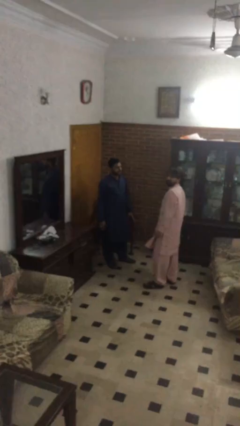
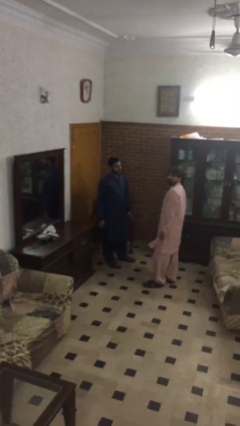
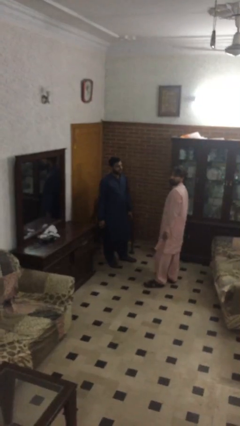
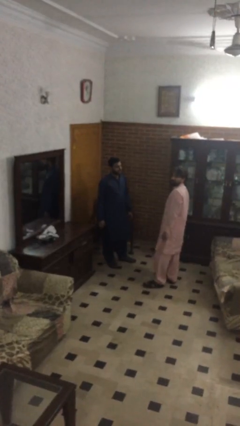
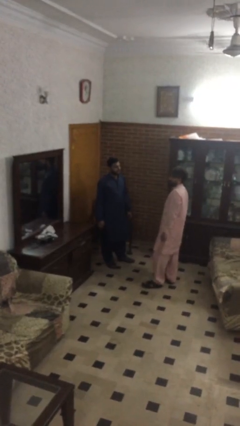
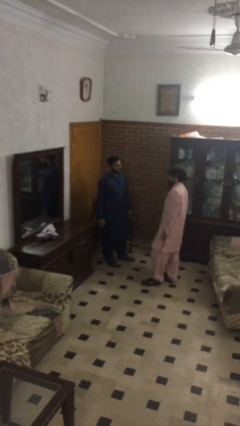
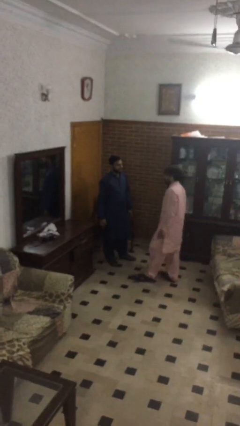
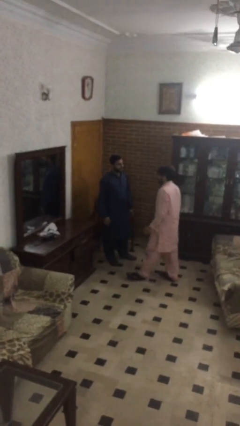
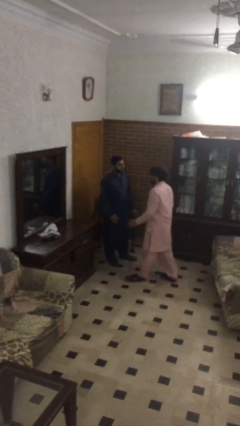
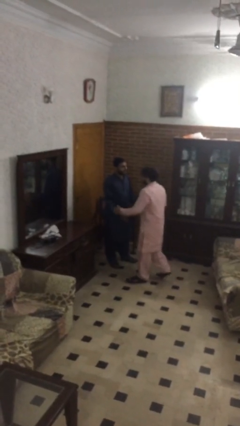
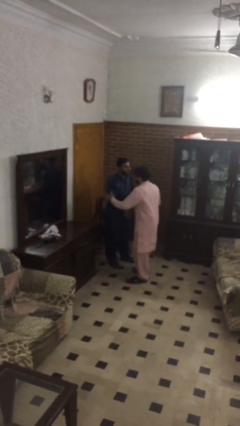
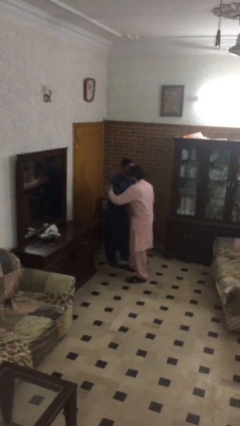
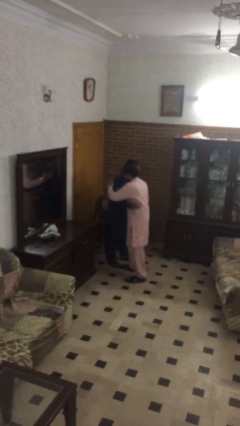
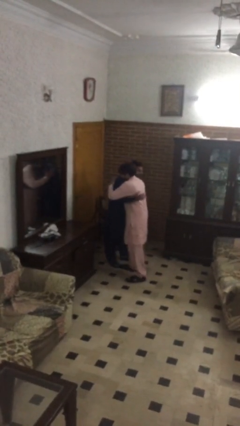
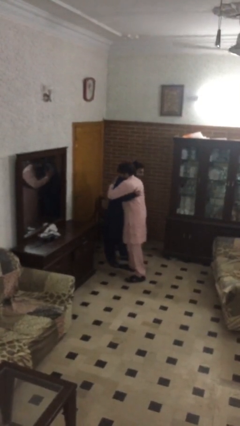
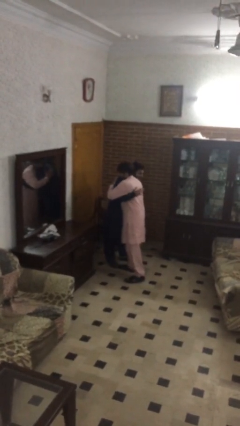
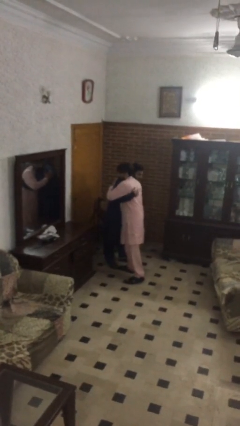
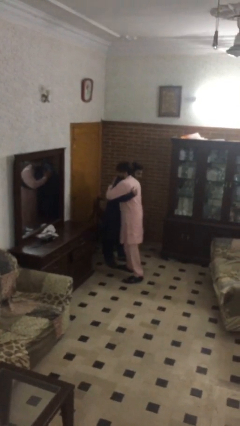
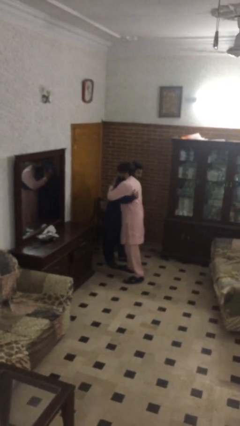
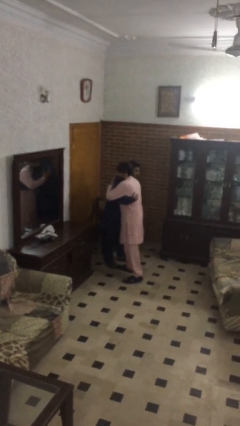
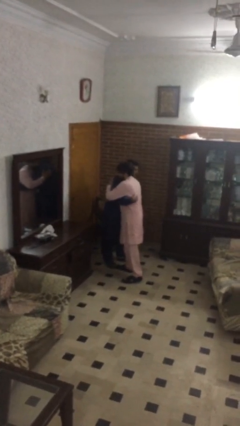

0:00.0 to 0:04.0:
person embraces person

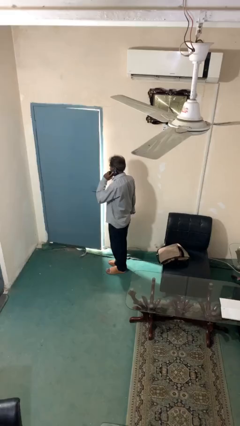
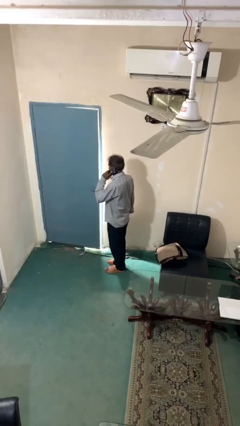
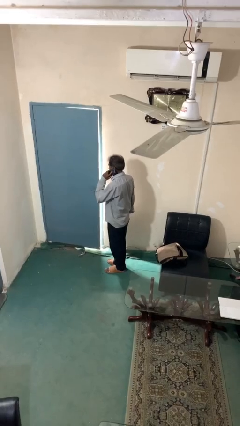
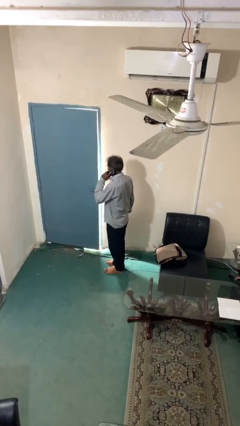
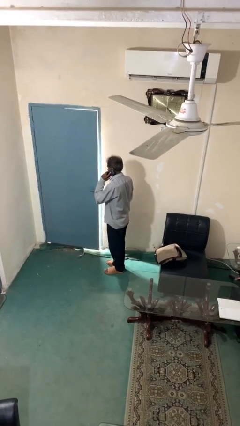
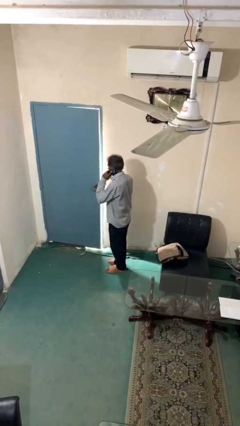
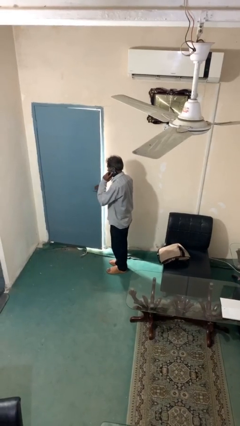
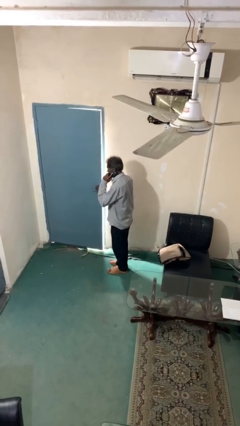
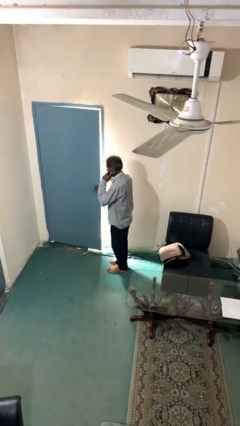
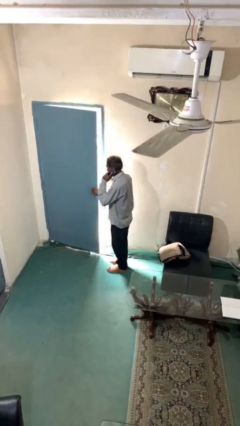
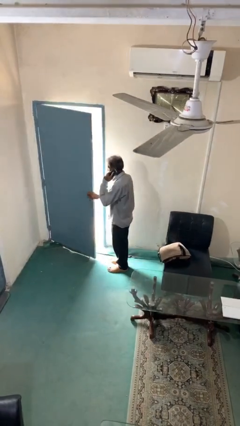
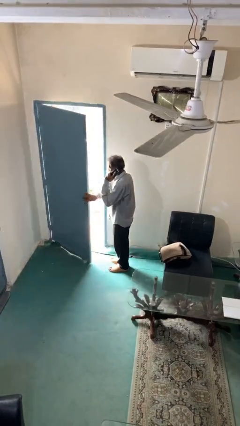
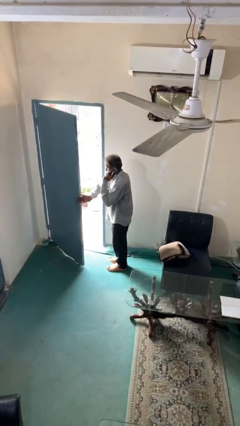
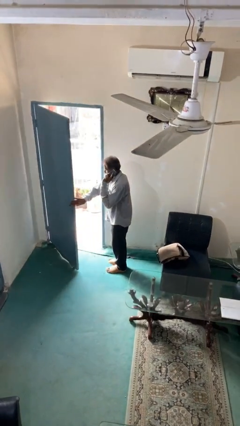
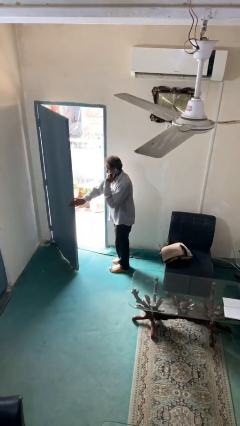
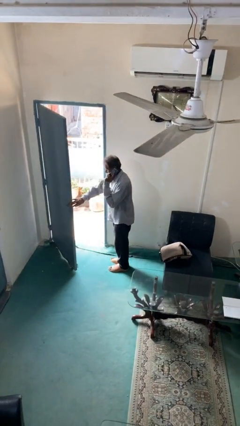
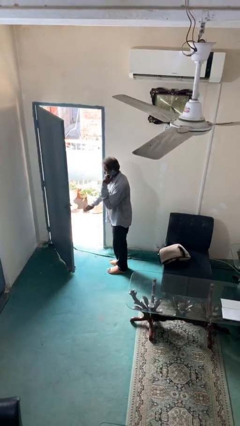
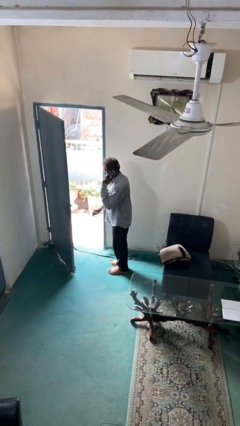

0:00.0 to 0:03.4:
person opens facility door

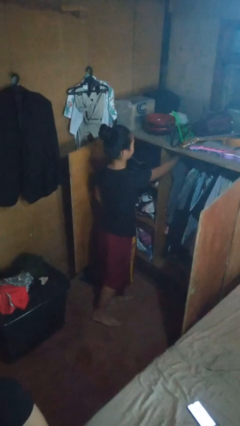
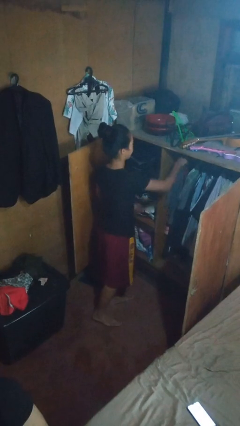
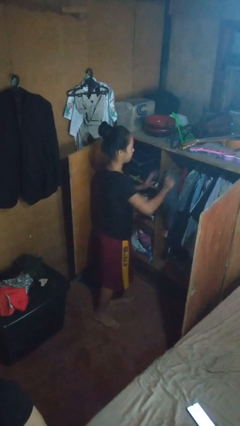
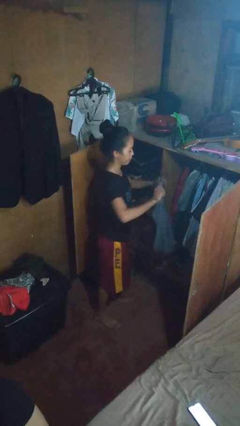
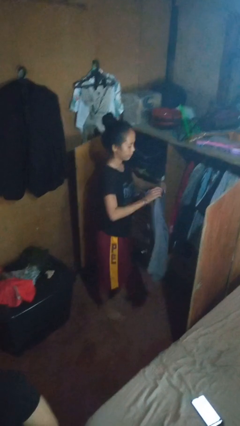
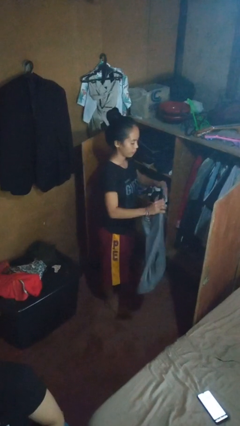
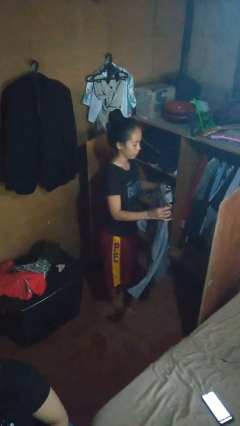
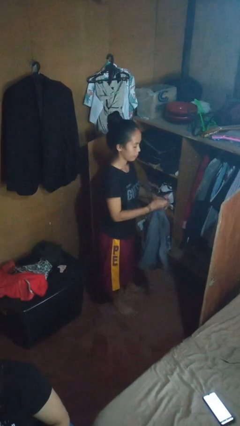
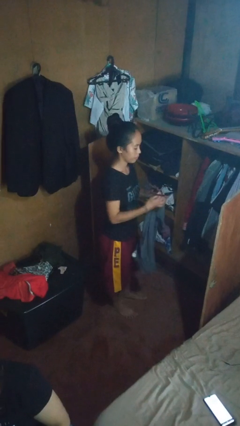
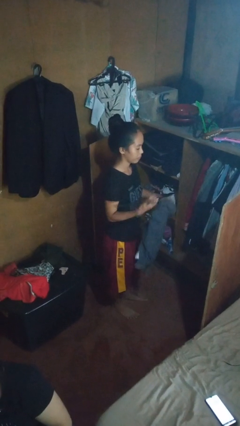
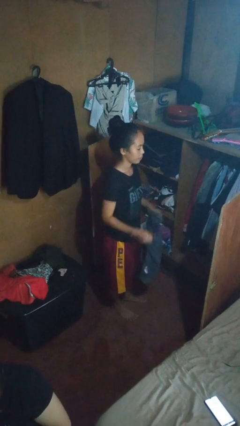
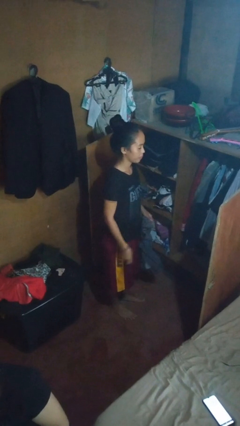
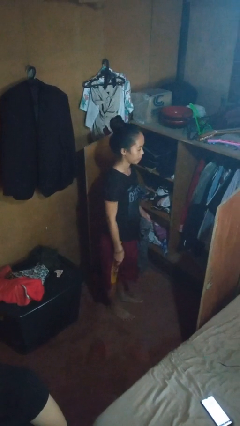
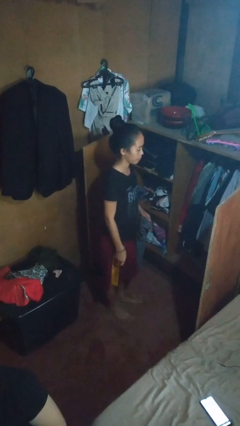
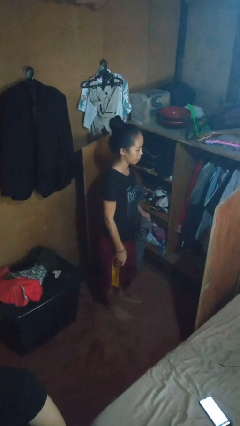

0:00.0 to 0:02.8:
person takes clothes from closet

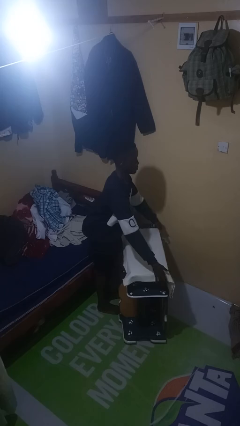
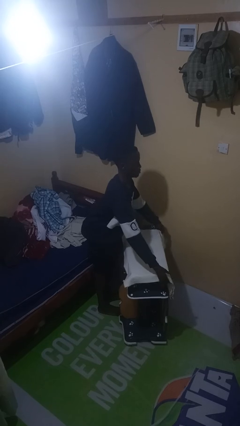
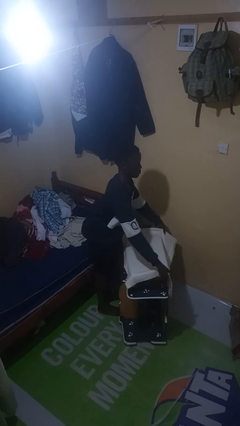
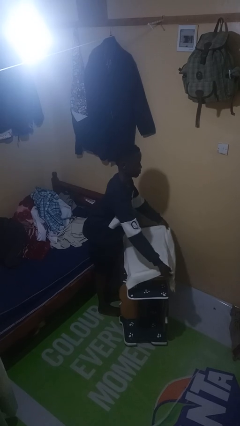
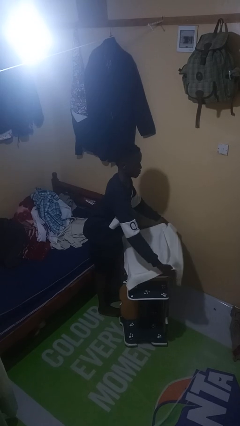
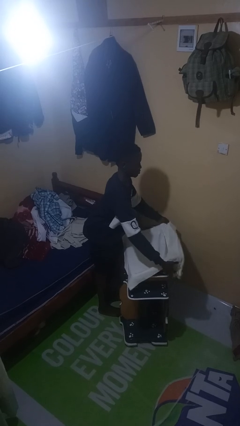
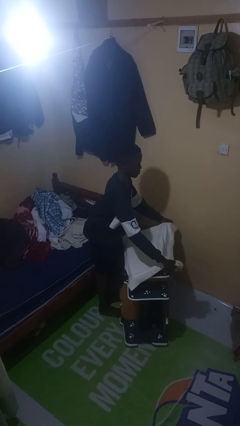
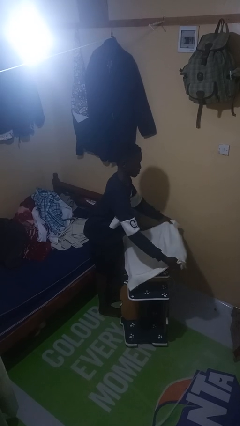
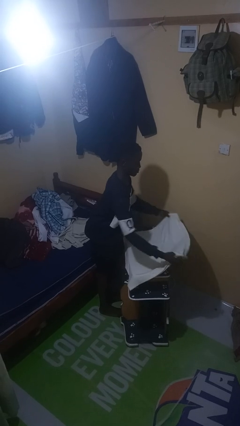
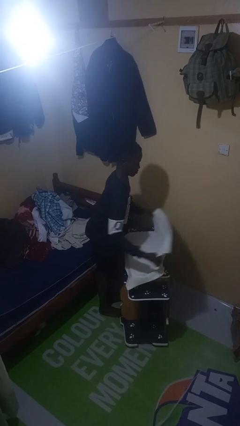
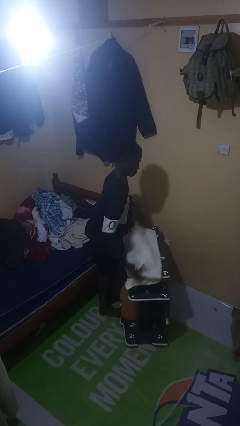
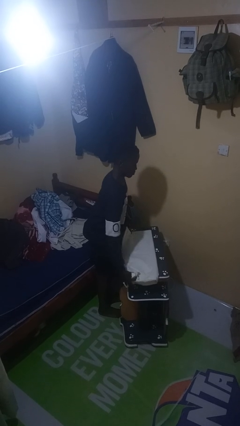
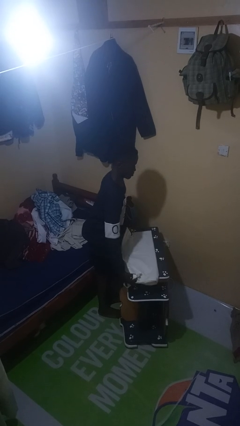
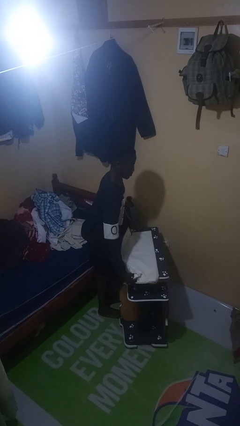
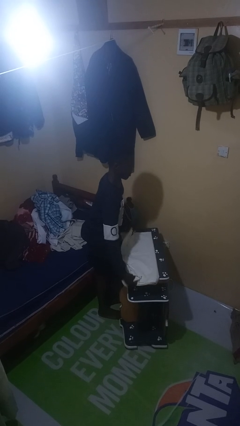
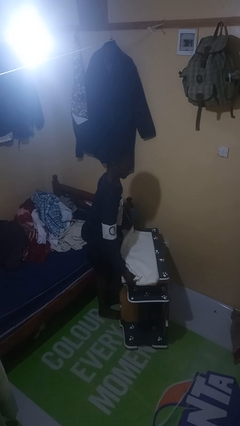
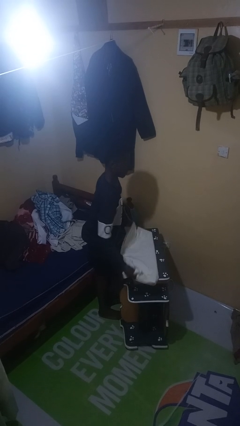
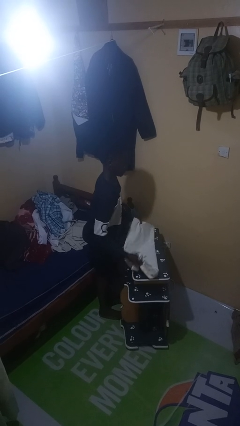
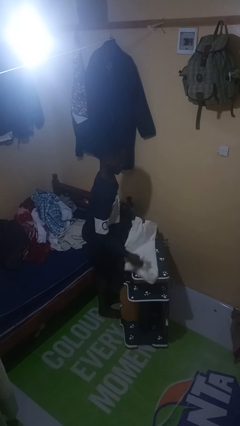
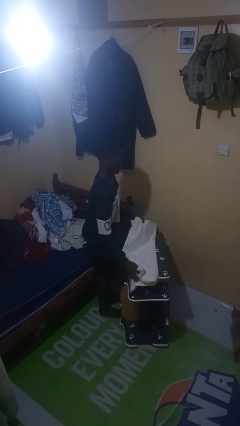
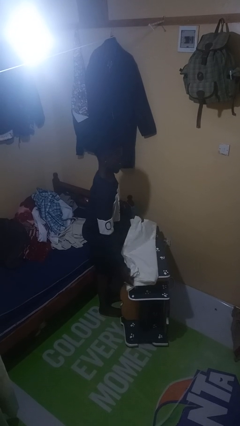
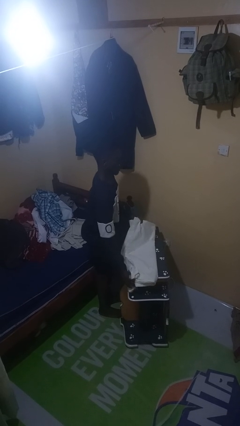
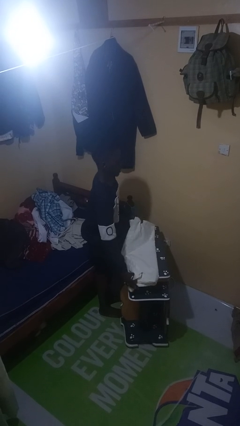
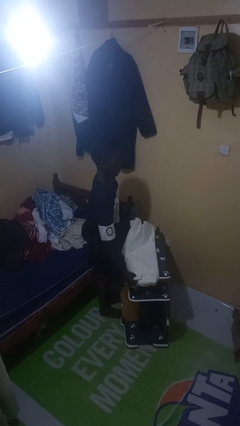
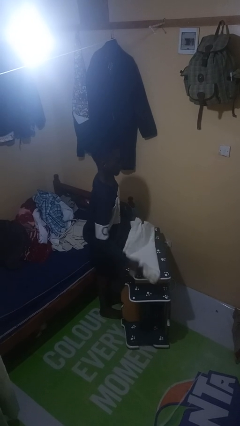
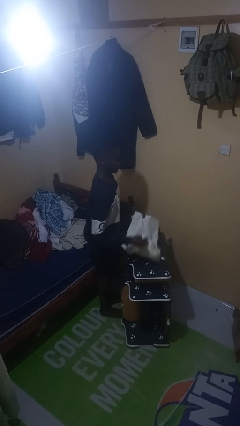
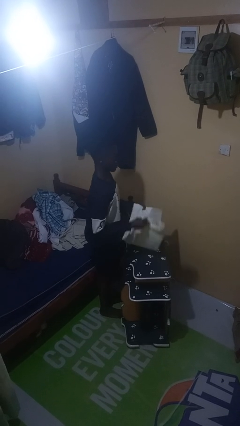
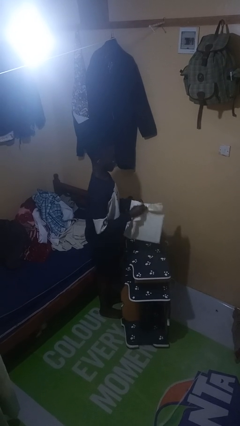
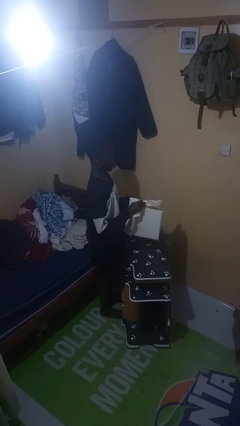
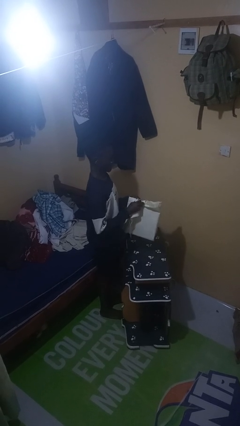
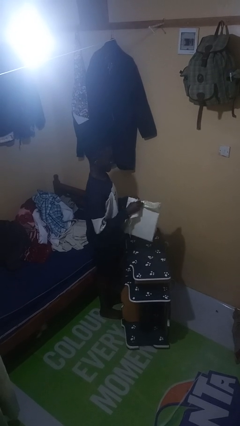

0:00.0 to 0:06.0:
person folds tablecloth

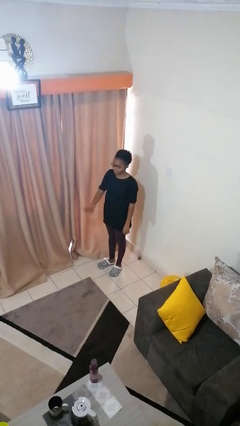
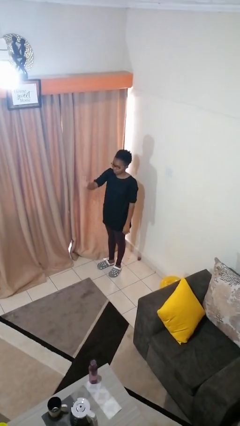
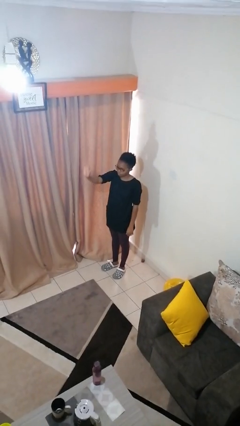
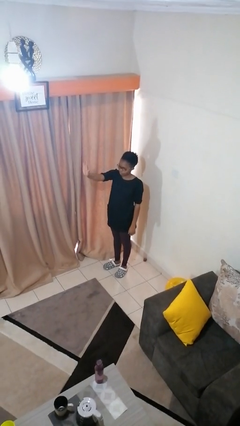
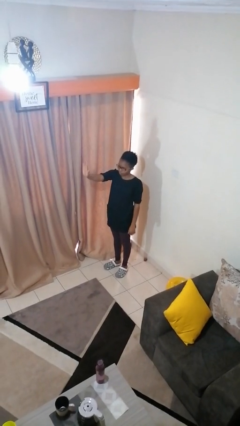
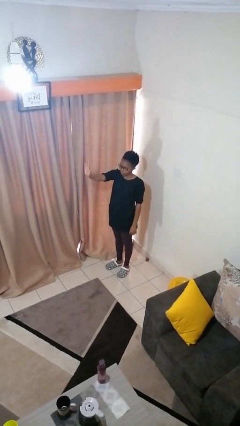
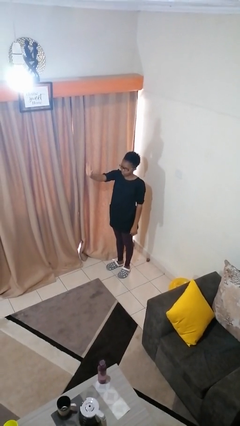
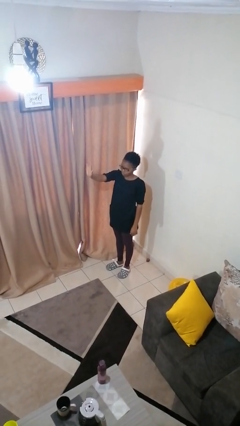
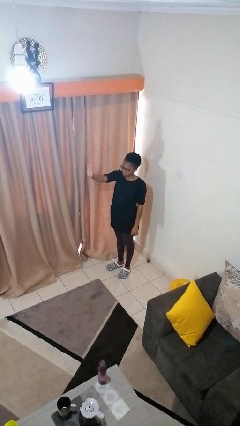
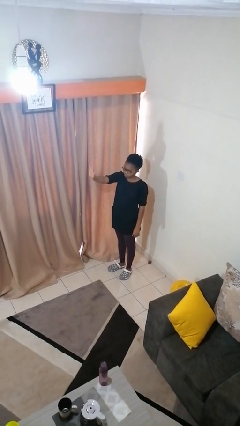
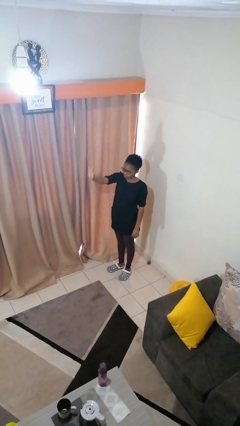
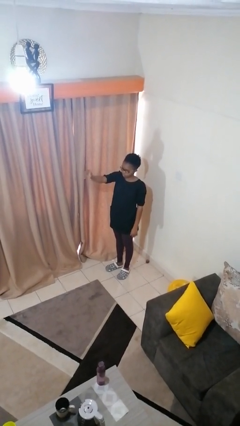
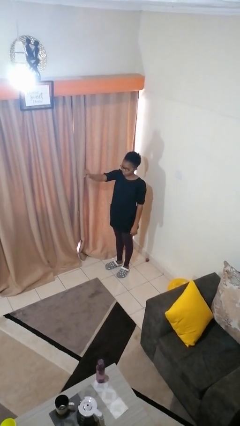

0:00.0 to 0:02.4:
person gestures stop
